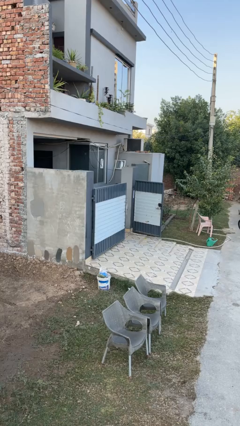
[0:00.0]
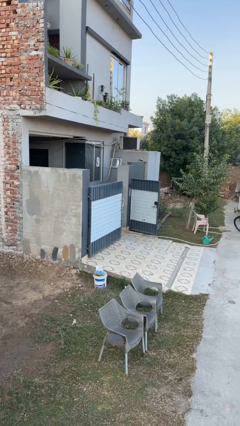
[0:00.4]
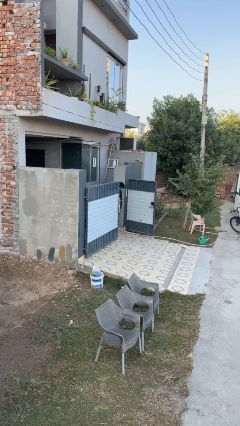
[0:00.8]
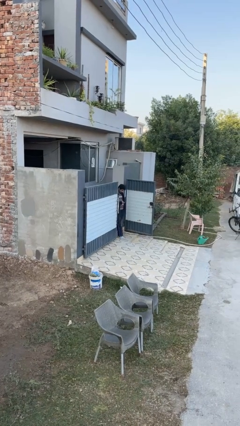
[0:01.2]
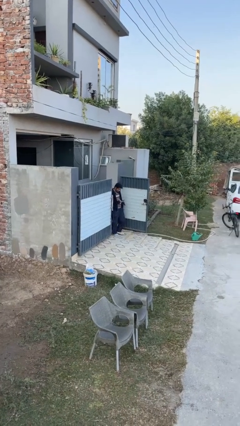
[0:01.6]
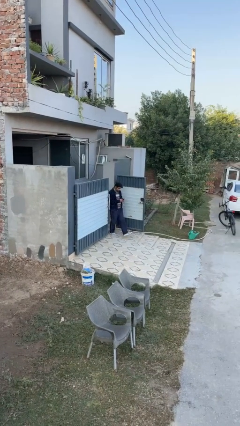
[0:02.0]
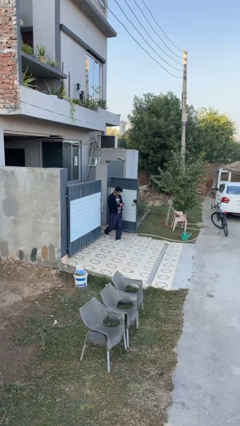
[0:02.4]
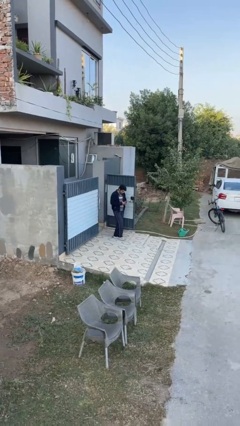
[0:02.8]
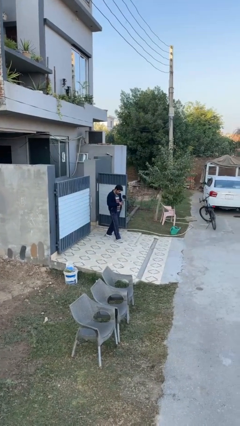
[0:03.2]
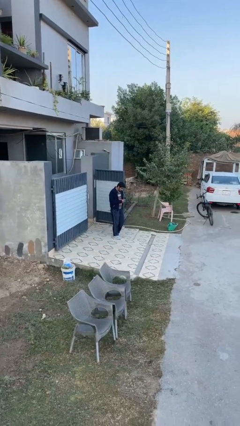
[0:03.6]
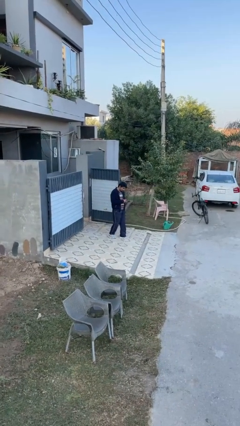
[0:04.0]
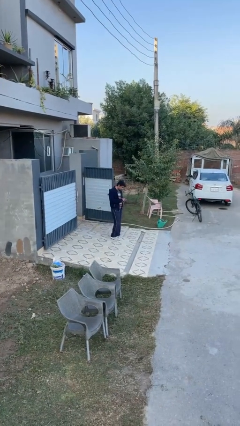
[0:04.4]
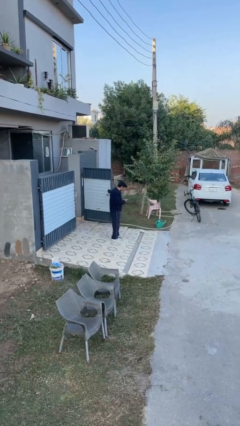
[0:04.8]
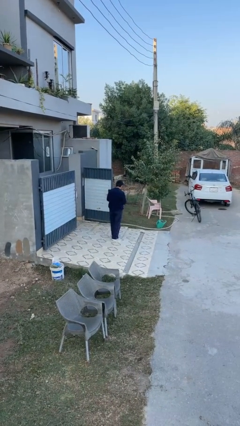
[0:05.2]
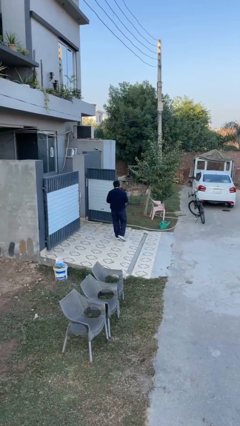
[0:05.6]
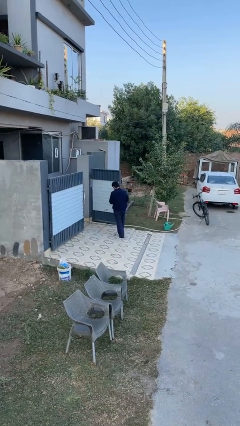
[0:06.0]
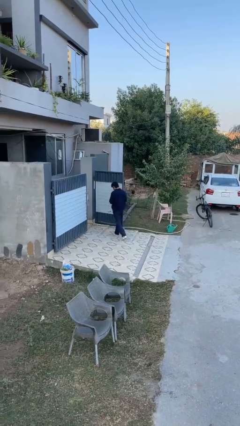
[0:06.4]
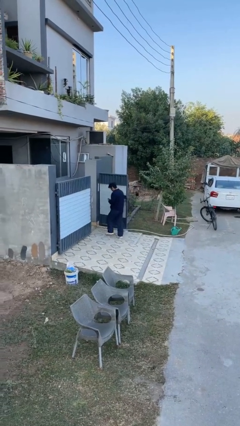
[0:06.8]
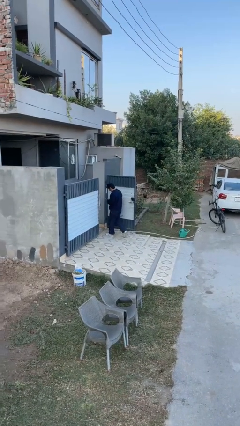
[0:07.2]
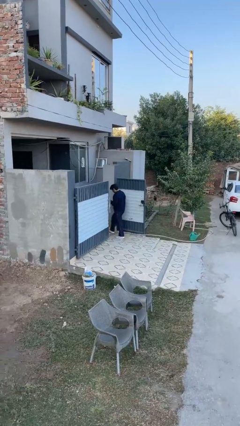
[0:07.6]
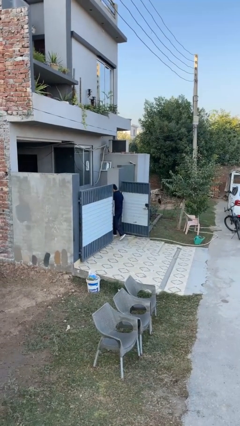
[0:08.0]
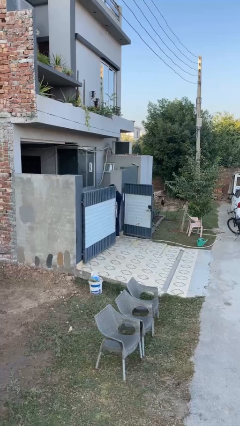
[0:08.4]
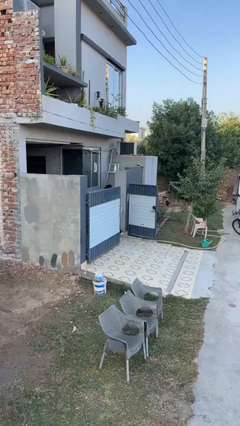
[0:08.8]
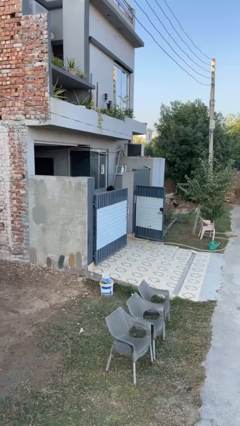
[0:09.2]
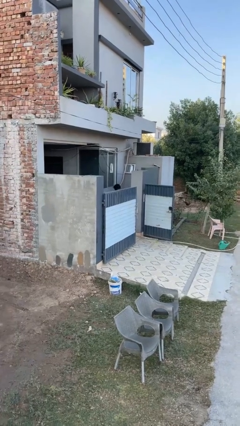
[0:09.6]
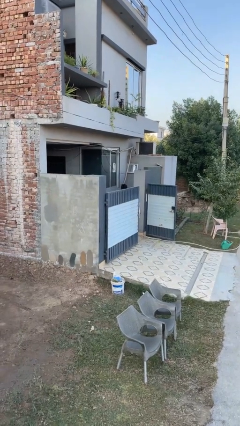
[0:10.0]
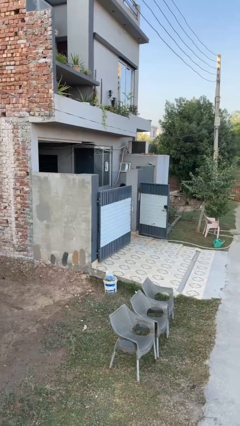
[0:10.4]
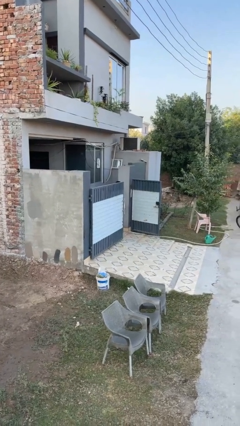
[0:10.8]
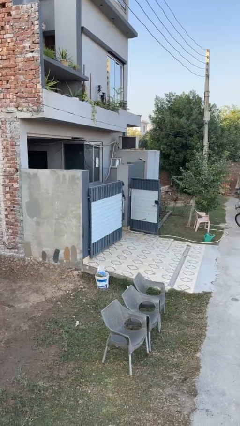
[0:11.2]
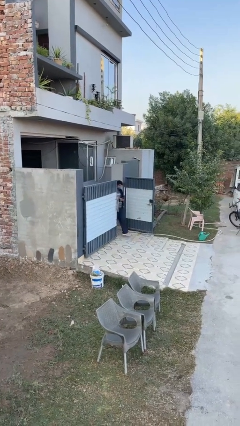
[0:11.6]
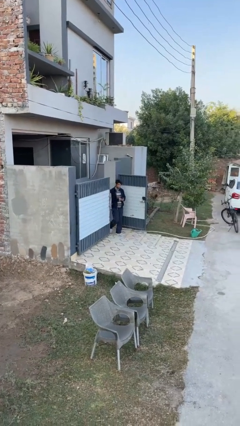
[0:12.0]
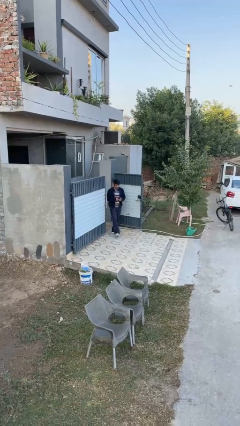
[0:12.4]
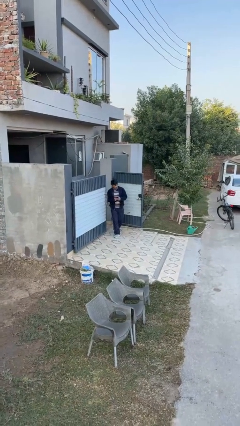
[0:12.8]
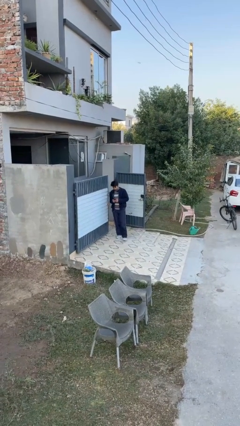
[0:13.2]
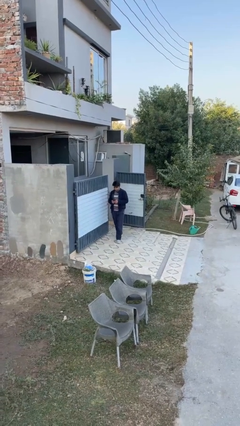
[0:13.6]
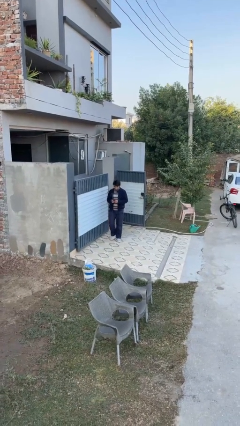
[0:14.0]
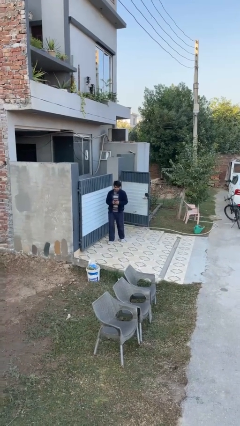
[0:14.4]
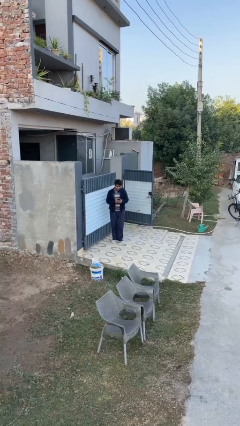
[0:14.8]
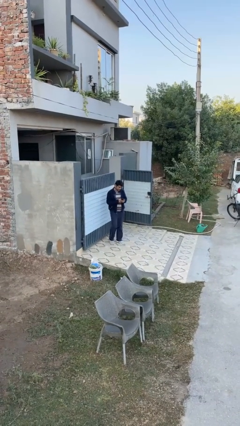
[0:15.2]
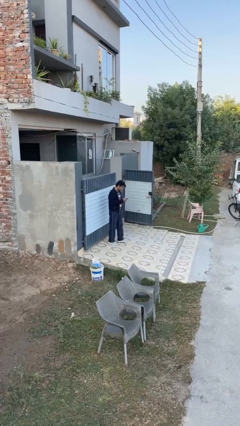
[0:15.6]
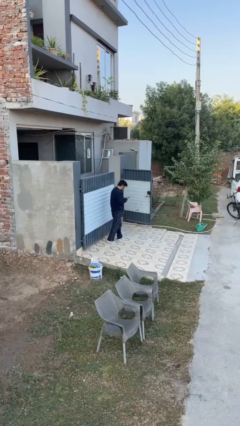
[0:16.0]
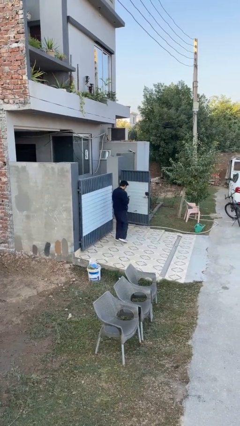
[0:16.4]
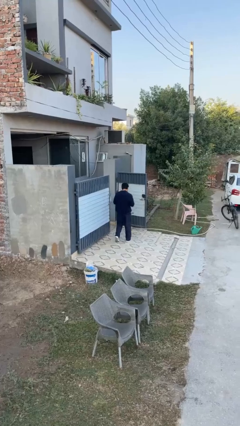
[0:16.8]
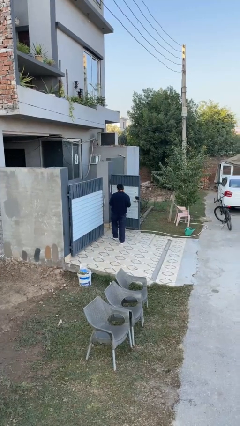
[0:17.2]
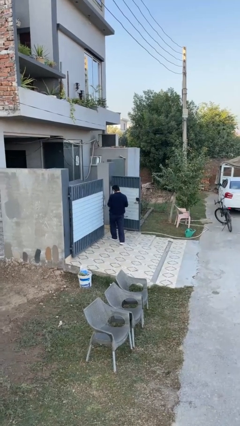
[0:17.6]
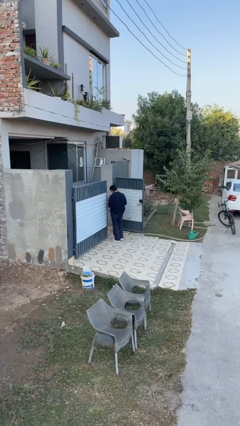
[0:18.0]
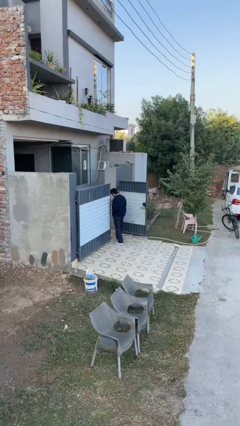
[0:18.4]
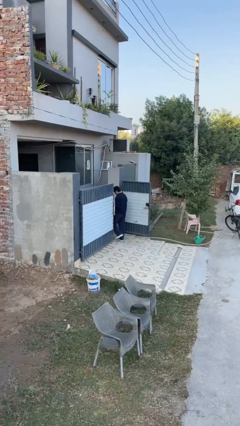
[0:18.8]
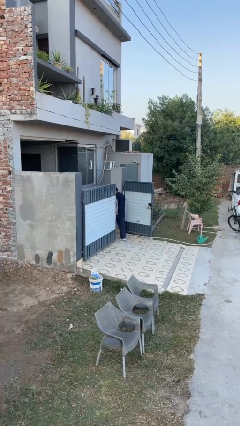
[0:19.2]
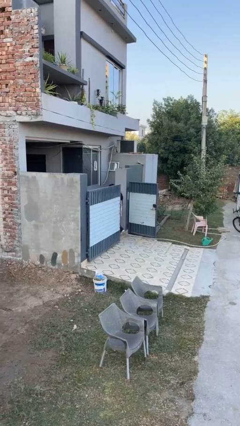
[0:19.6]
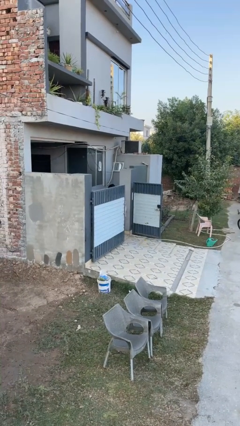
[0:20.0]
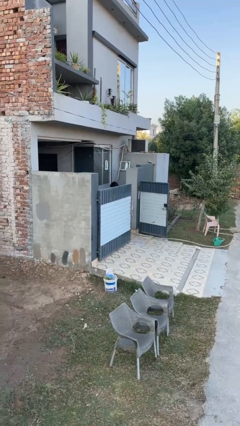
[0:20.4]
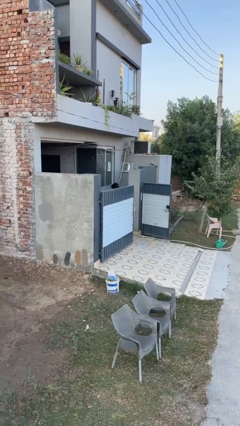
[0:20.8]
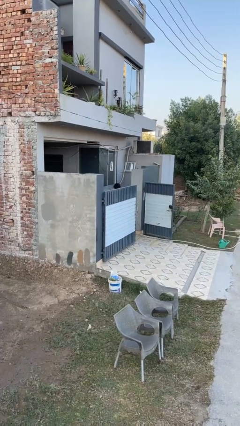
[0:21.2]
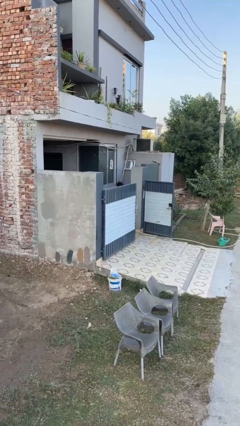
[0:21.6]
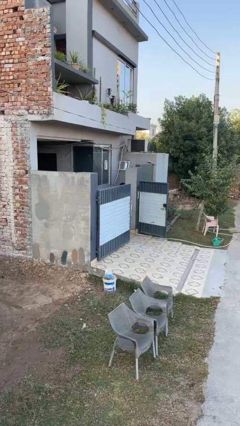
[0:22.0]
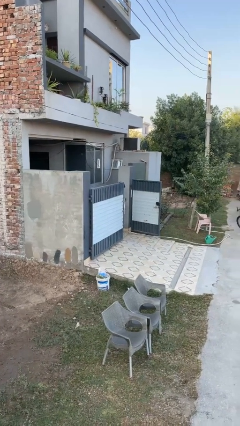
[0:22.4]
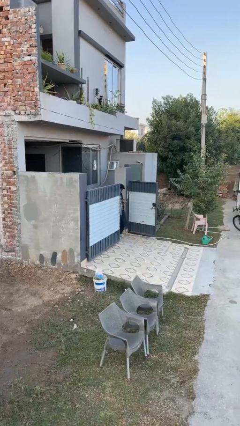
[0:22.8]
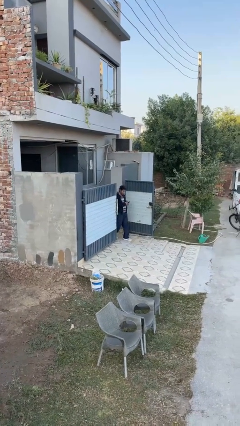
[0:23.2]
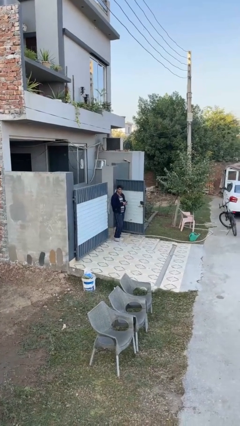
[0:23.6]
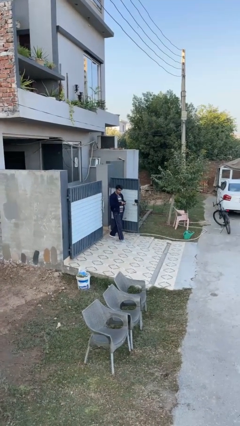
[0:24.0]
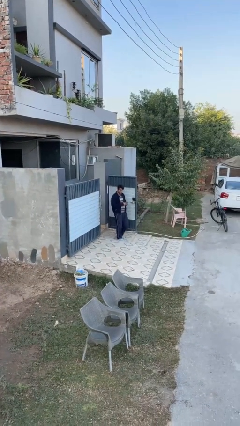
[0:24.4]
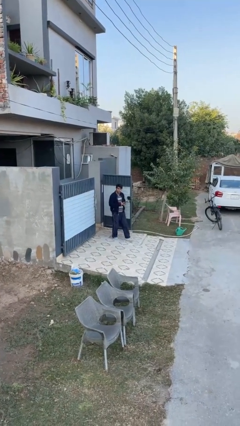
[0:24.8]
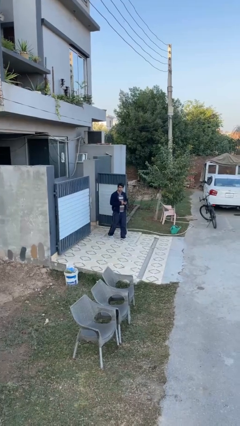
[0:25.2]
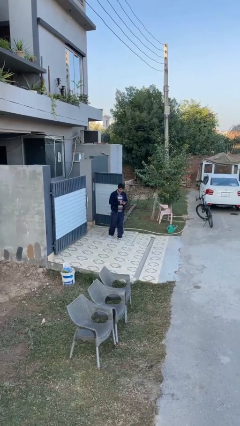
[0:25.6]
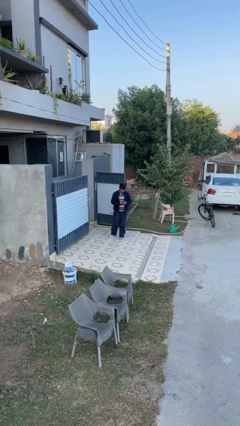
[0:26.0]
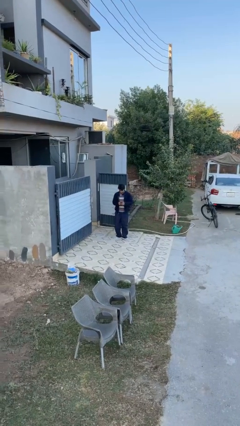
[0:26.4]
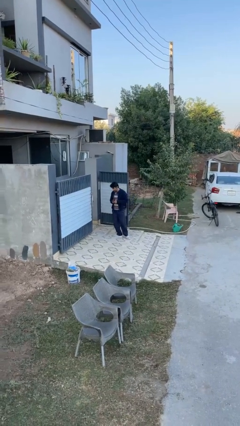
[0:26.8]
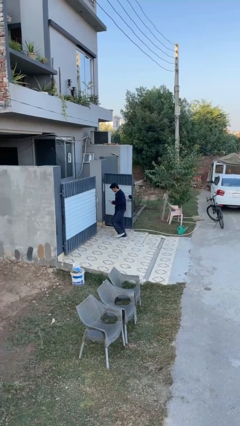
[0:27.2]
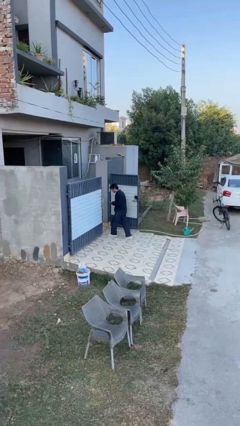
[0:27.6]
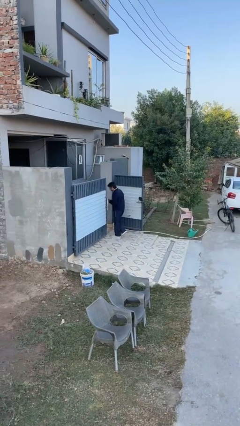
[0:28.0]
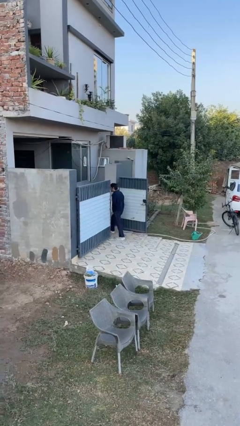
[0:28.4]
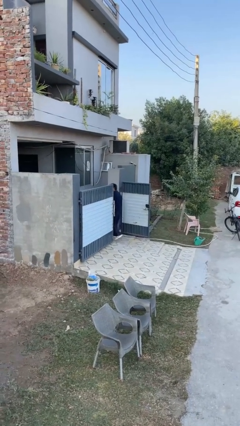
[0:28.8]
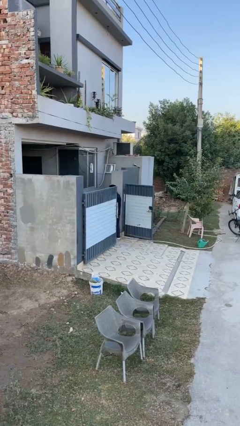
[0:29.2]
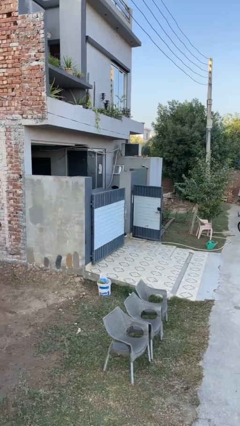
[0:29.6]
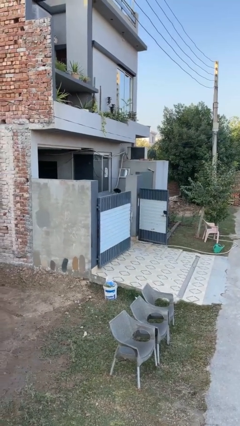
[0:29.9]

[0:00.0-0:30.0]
person texts on phone

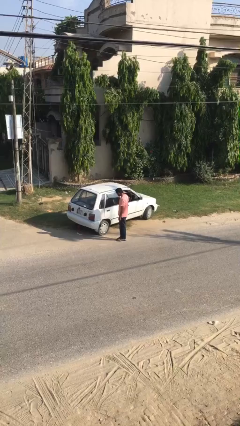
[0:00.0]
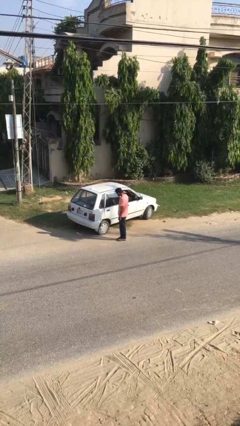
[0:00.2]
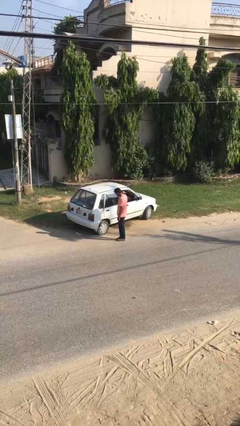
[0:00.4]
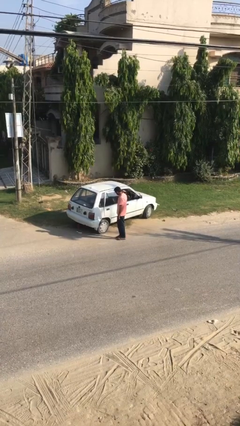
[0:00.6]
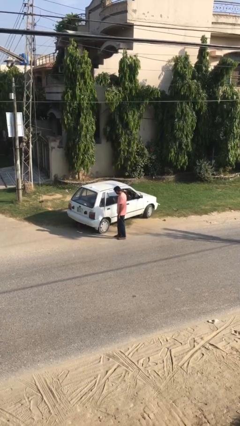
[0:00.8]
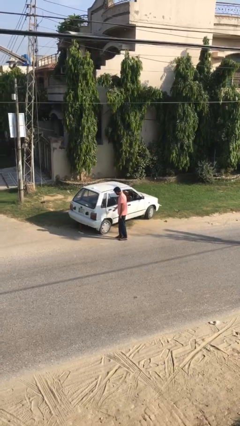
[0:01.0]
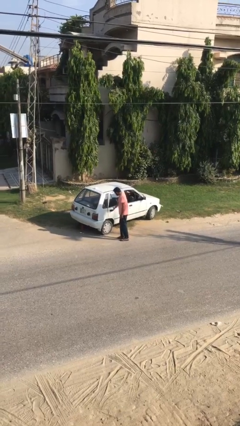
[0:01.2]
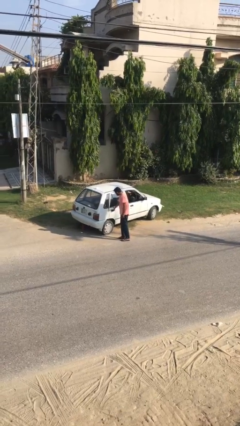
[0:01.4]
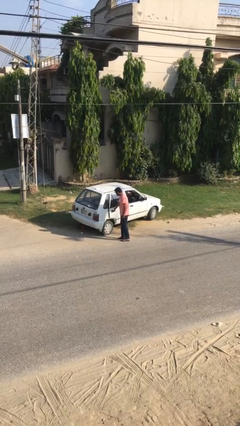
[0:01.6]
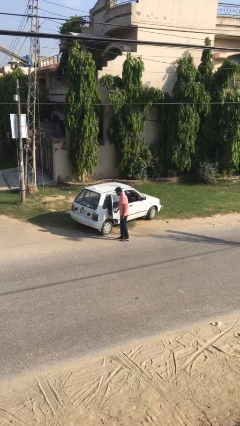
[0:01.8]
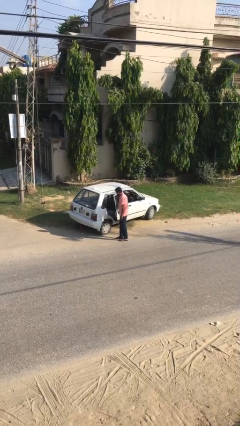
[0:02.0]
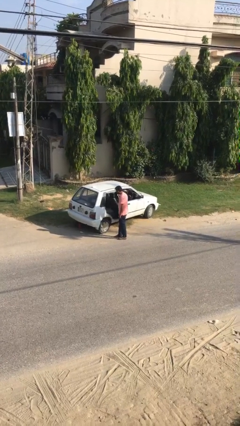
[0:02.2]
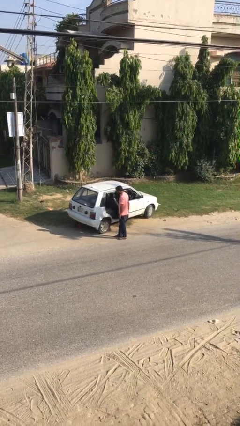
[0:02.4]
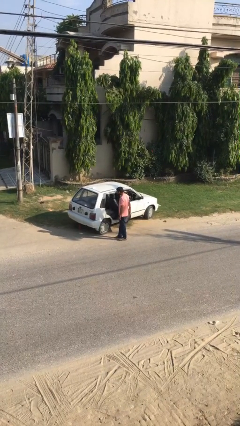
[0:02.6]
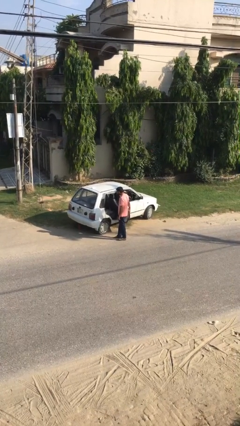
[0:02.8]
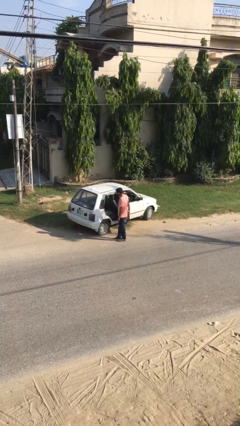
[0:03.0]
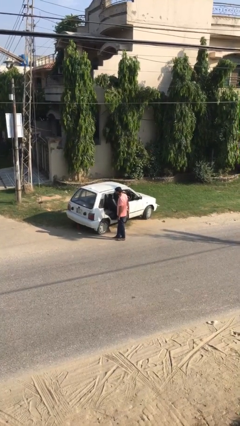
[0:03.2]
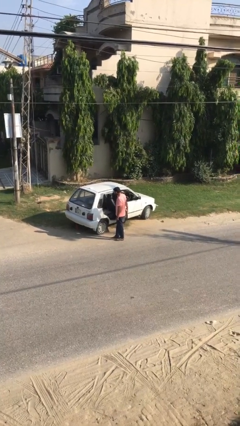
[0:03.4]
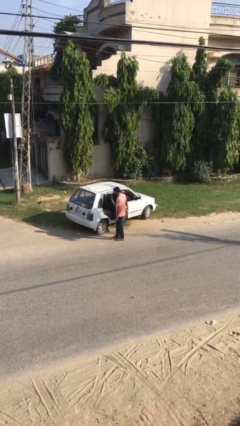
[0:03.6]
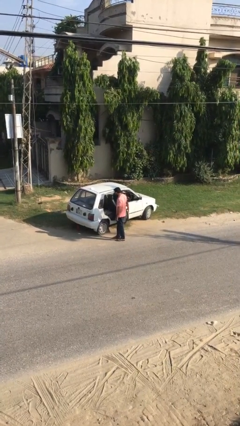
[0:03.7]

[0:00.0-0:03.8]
person opens car door
